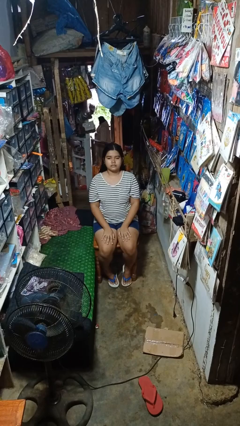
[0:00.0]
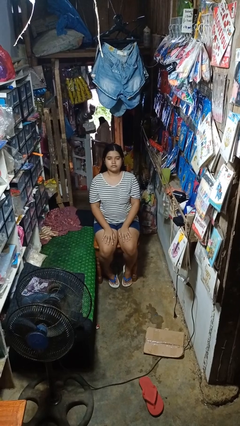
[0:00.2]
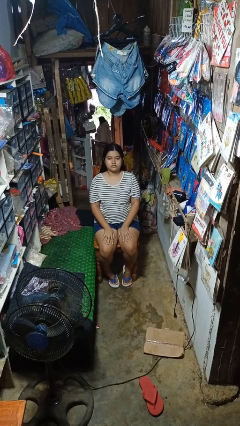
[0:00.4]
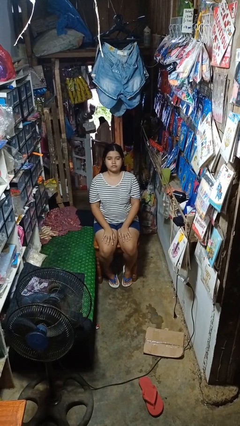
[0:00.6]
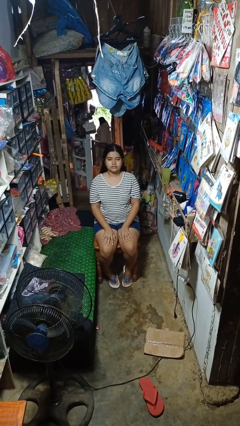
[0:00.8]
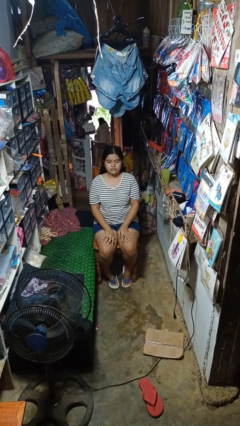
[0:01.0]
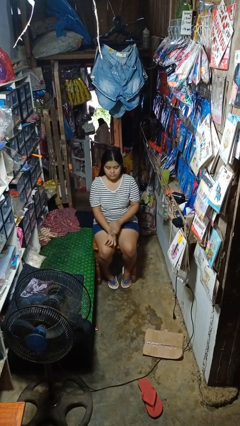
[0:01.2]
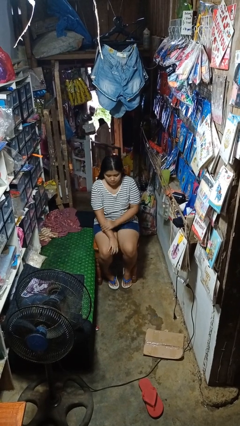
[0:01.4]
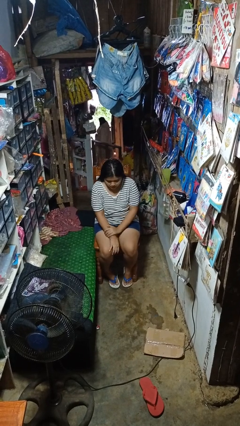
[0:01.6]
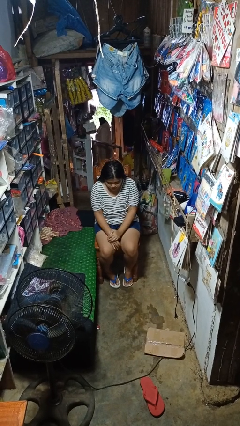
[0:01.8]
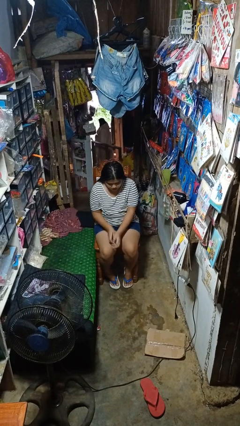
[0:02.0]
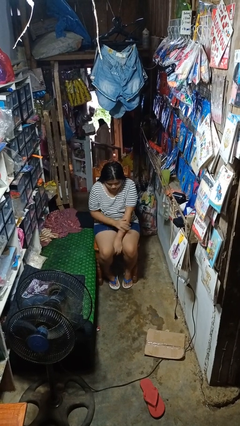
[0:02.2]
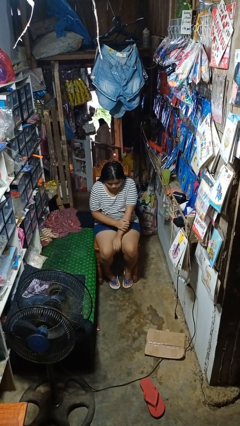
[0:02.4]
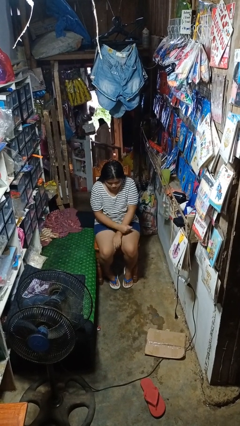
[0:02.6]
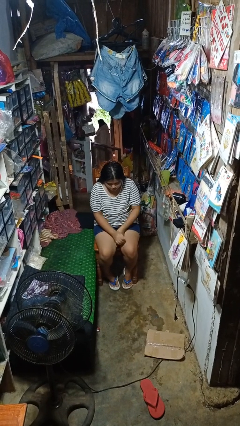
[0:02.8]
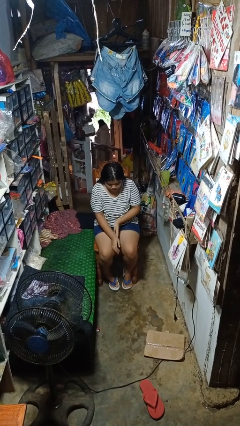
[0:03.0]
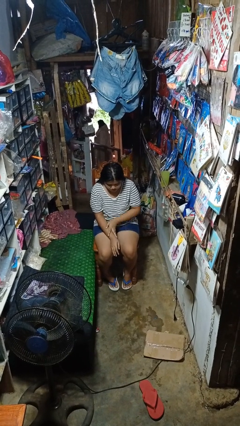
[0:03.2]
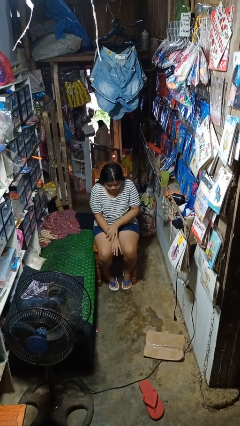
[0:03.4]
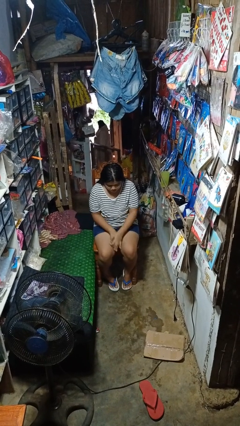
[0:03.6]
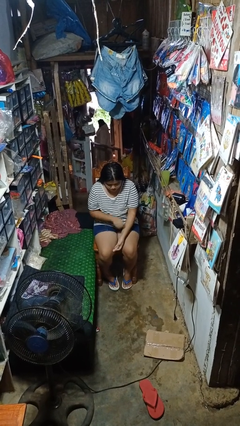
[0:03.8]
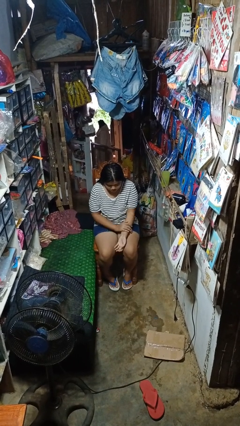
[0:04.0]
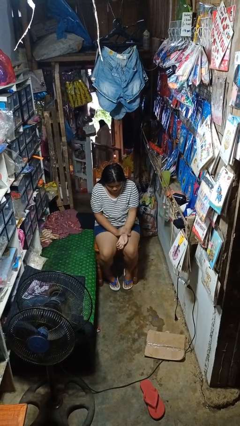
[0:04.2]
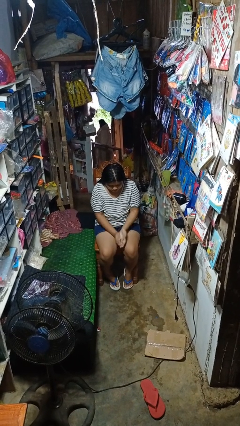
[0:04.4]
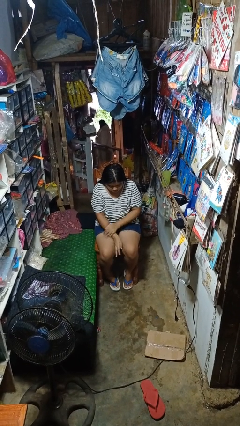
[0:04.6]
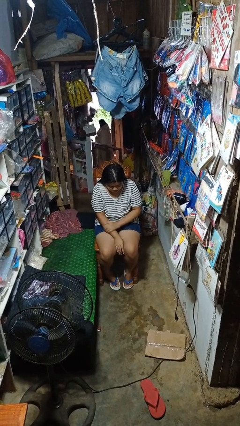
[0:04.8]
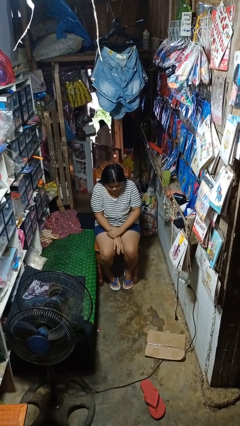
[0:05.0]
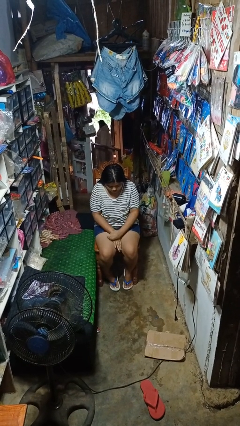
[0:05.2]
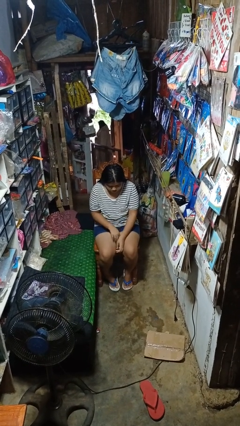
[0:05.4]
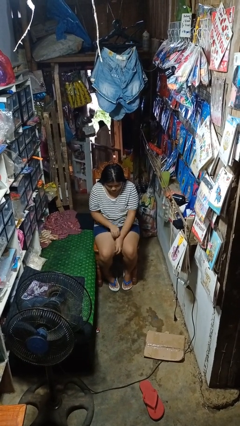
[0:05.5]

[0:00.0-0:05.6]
person looks at hands in lap

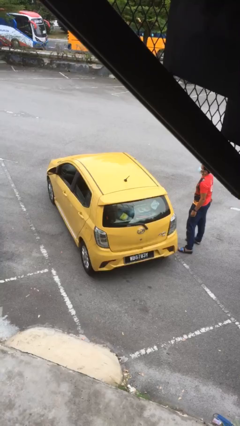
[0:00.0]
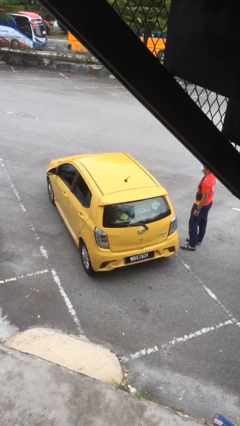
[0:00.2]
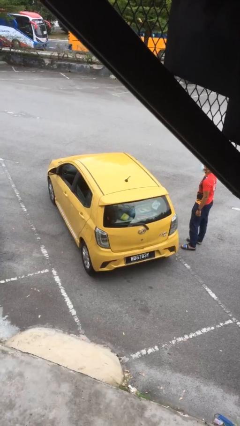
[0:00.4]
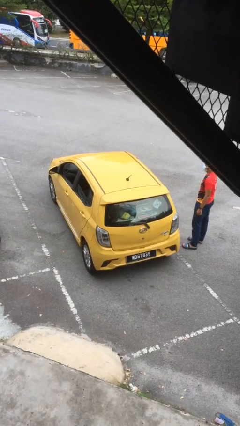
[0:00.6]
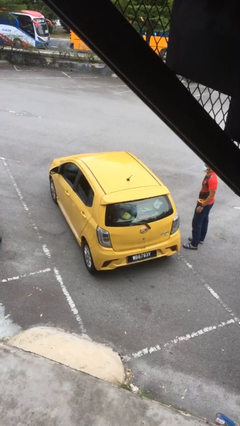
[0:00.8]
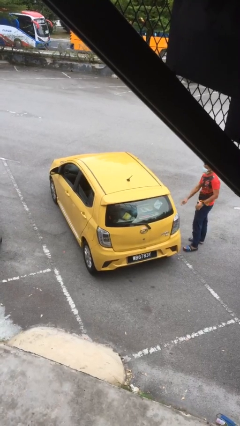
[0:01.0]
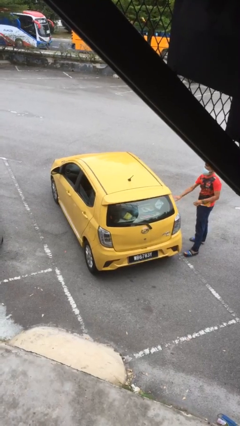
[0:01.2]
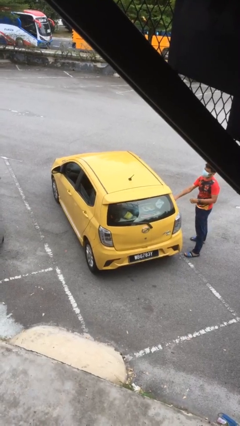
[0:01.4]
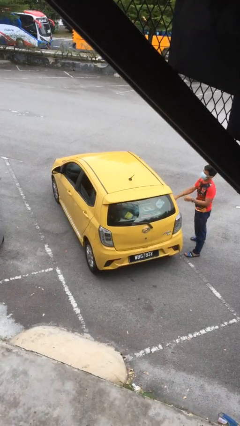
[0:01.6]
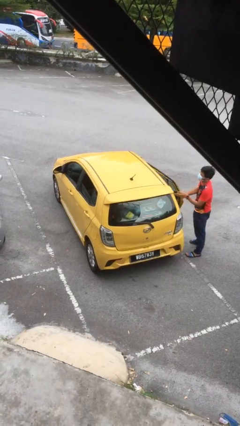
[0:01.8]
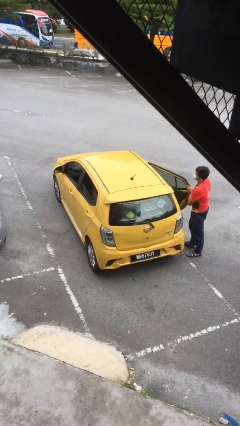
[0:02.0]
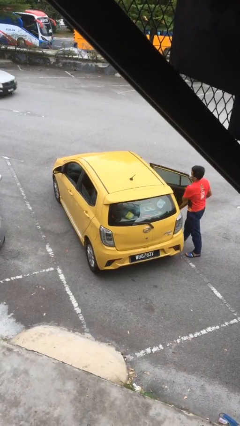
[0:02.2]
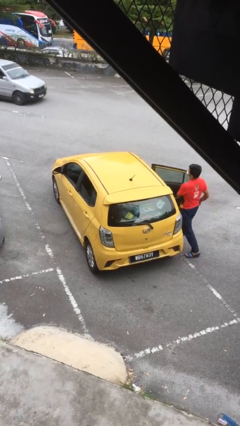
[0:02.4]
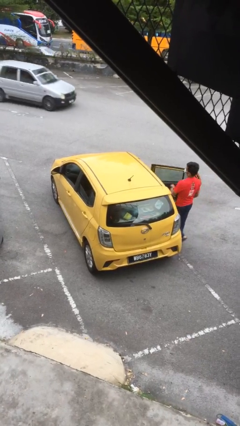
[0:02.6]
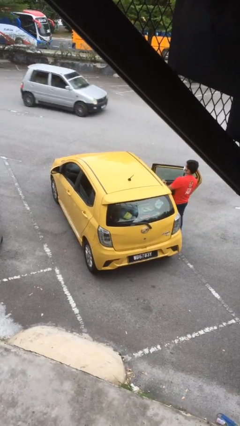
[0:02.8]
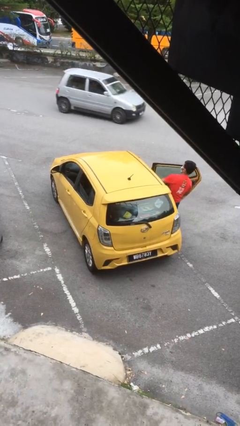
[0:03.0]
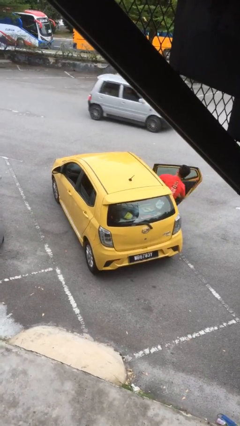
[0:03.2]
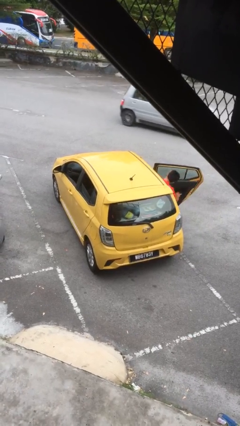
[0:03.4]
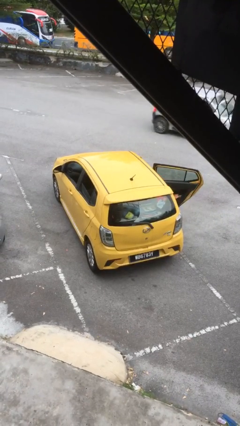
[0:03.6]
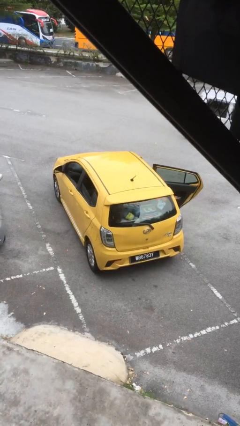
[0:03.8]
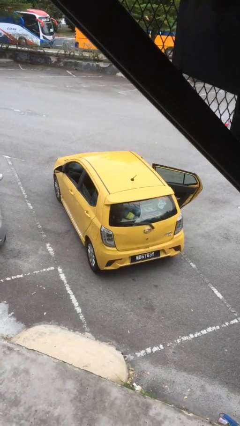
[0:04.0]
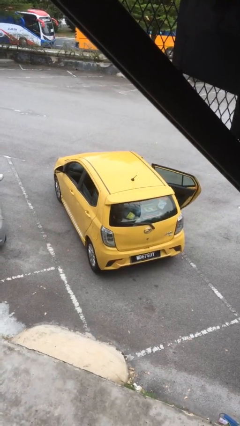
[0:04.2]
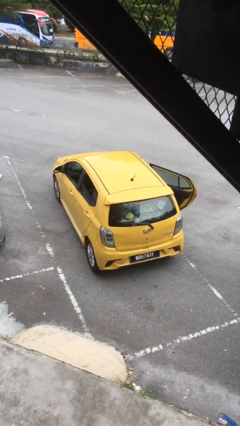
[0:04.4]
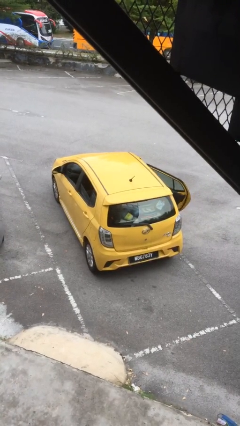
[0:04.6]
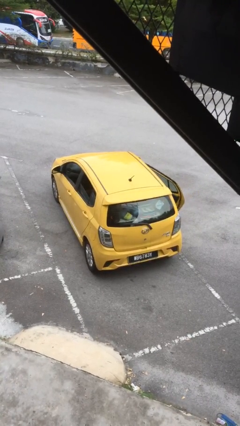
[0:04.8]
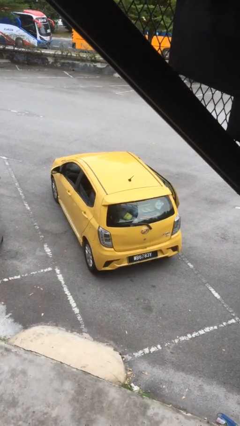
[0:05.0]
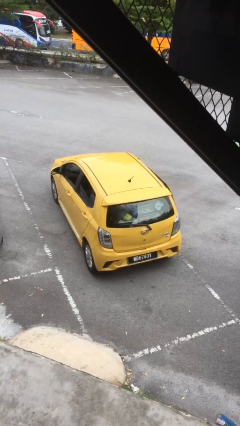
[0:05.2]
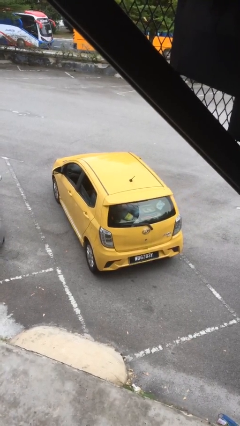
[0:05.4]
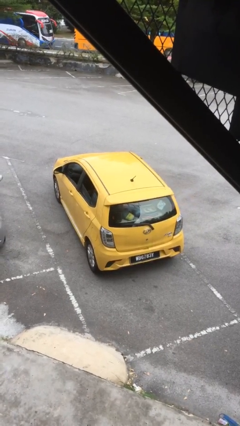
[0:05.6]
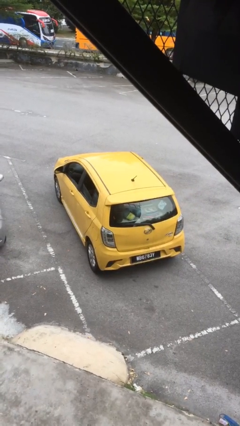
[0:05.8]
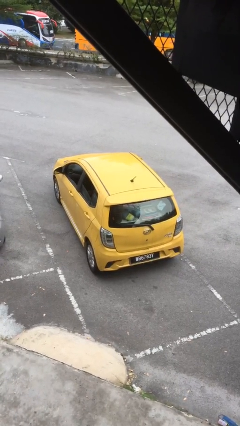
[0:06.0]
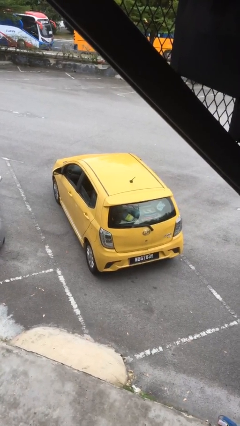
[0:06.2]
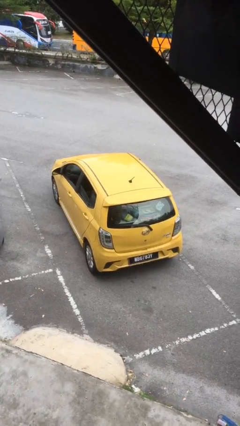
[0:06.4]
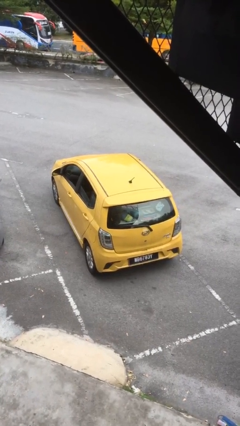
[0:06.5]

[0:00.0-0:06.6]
car picks up person

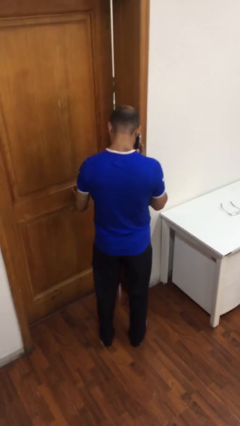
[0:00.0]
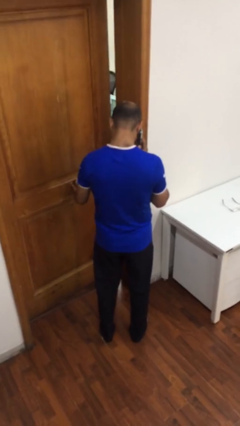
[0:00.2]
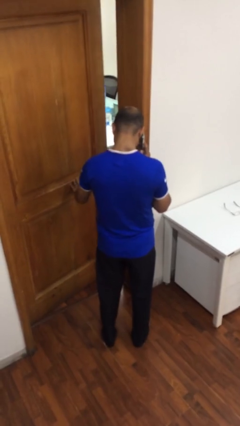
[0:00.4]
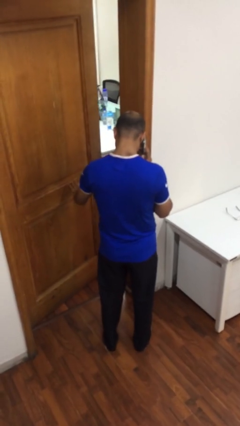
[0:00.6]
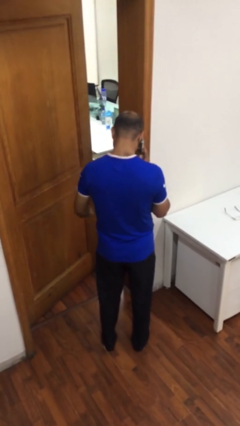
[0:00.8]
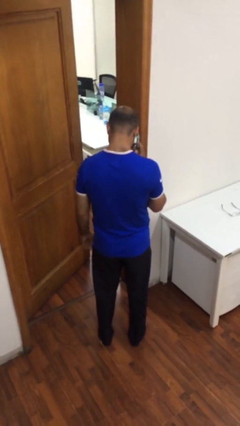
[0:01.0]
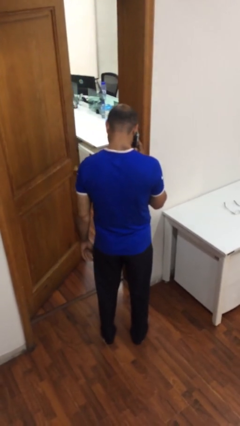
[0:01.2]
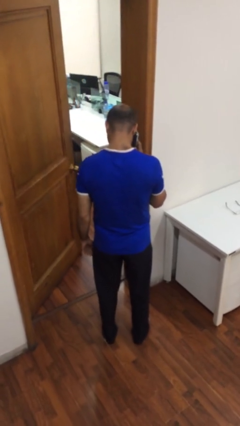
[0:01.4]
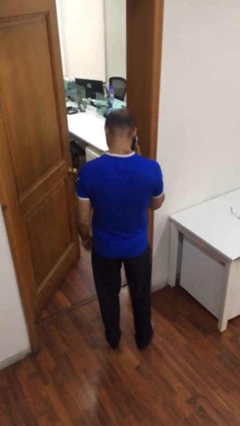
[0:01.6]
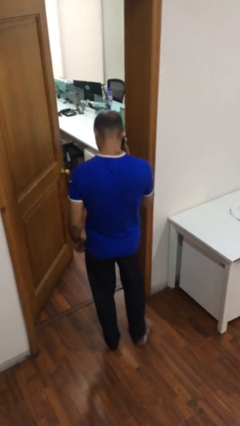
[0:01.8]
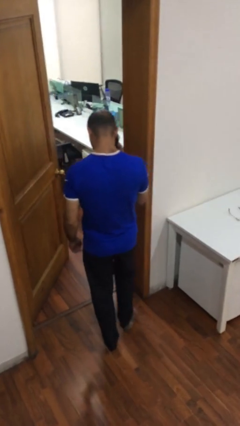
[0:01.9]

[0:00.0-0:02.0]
person opens facility door

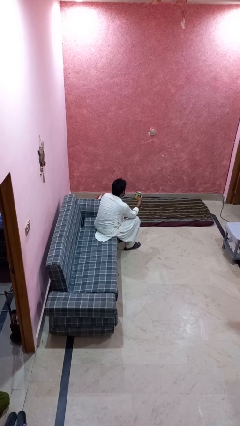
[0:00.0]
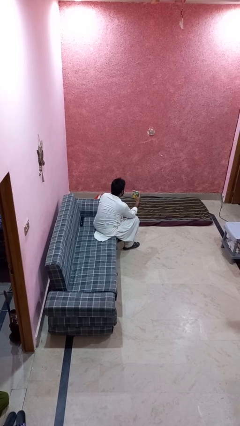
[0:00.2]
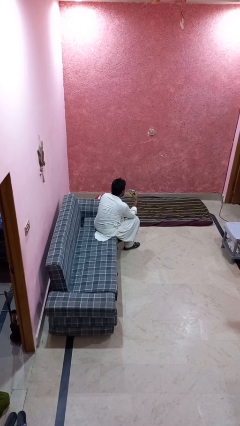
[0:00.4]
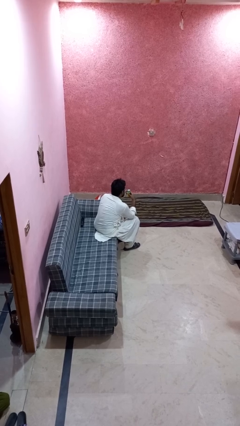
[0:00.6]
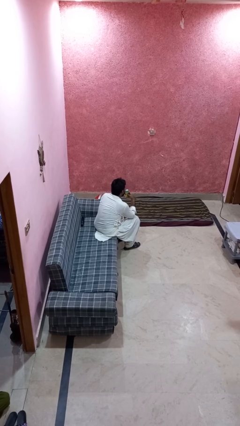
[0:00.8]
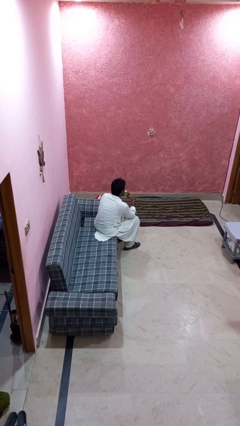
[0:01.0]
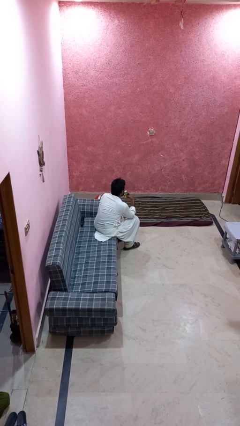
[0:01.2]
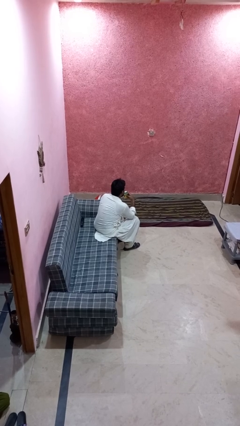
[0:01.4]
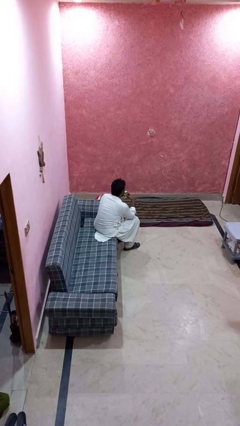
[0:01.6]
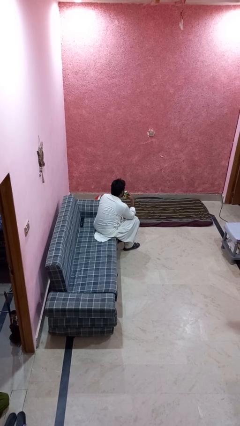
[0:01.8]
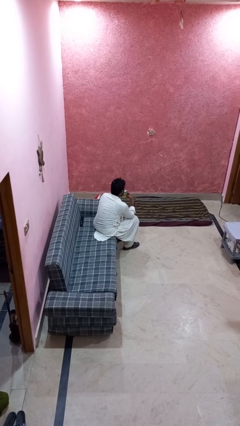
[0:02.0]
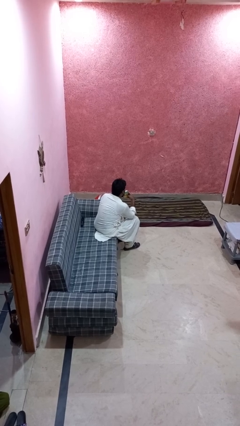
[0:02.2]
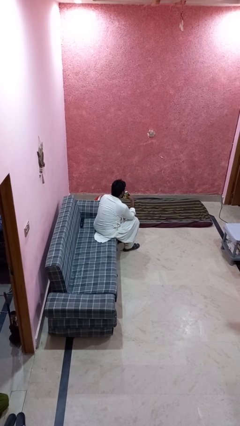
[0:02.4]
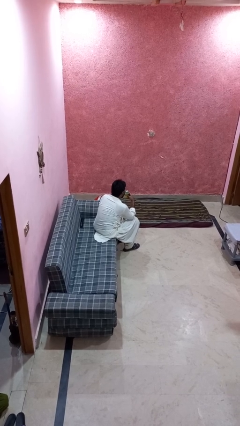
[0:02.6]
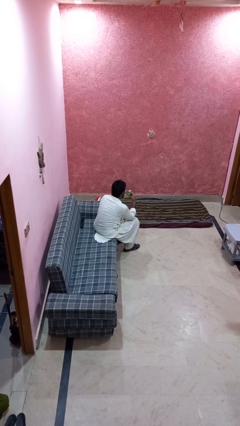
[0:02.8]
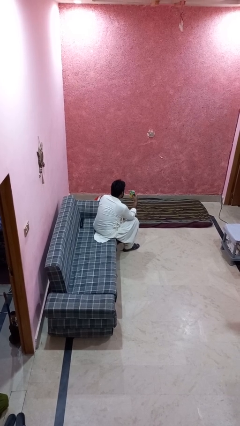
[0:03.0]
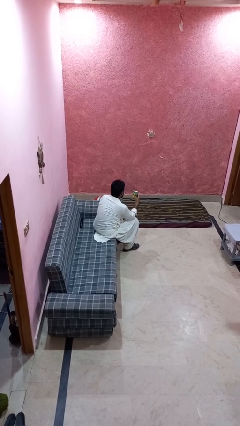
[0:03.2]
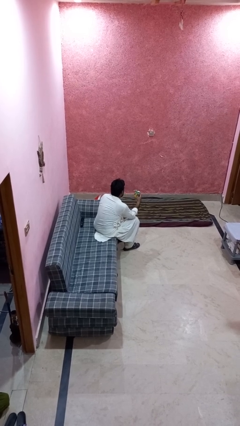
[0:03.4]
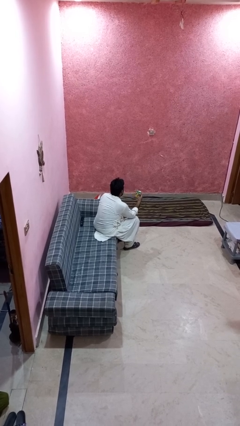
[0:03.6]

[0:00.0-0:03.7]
person drinks from straw
